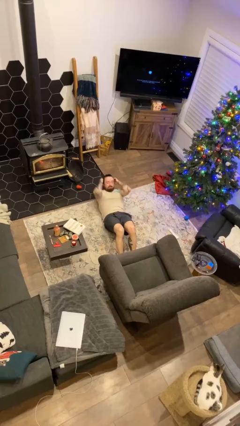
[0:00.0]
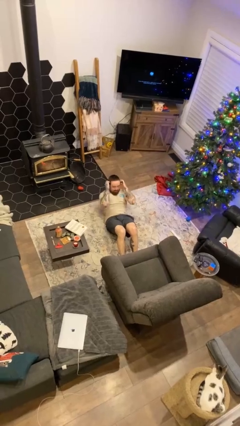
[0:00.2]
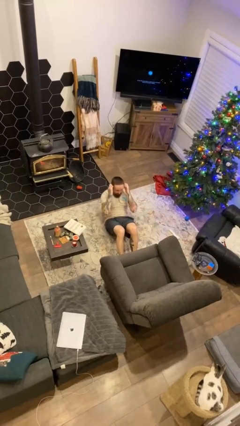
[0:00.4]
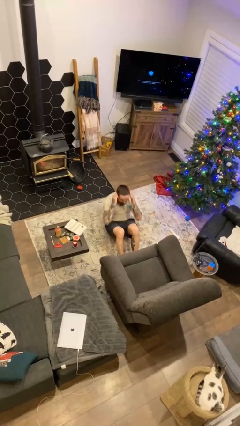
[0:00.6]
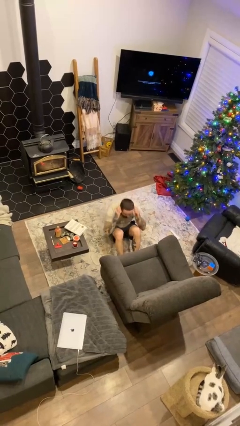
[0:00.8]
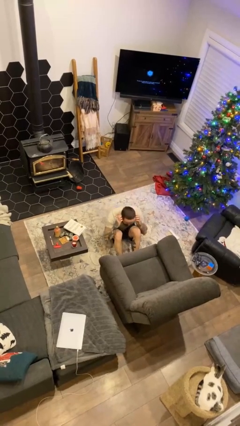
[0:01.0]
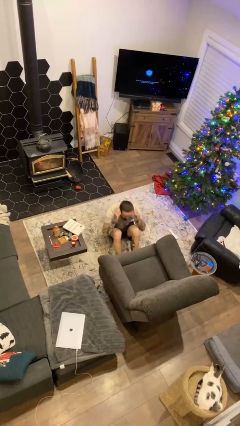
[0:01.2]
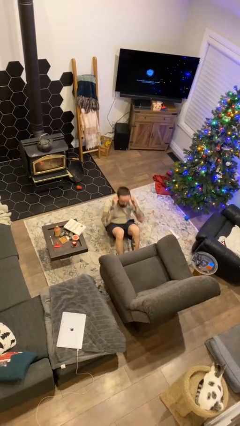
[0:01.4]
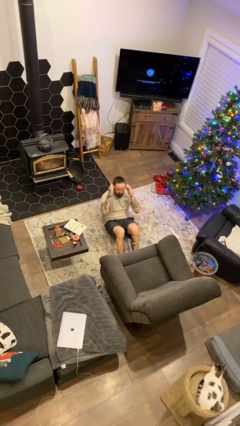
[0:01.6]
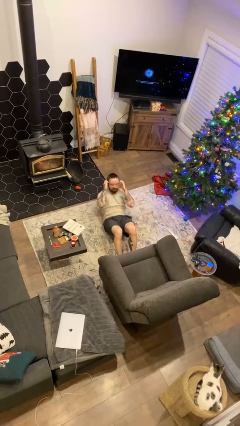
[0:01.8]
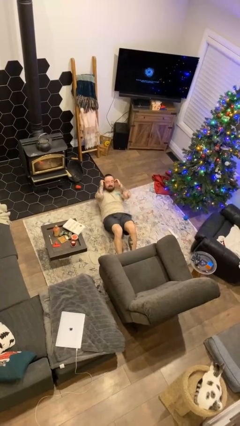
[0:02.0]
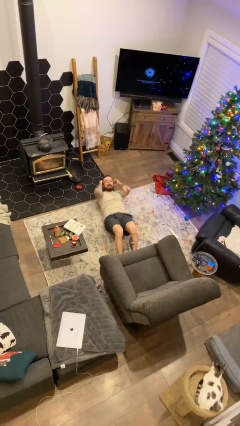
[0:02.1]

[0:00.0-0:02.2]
person exercises with situp

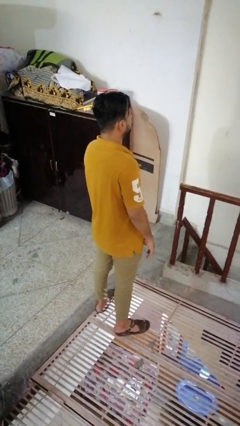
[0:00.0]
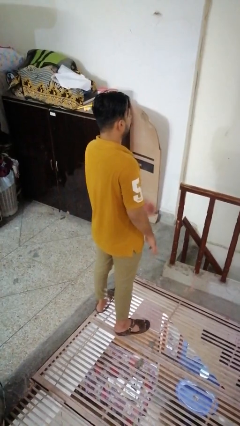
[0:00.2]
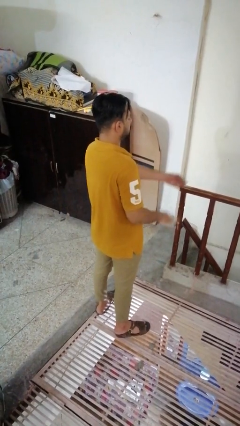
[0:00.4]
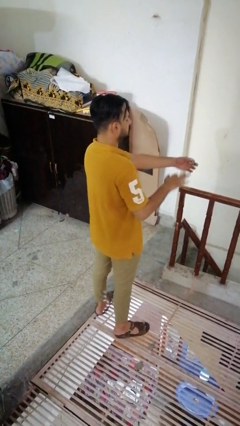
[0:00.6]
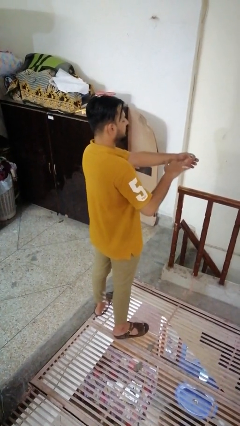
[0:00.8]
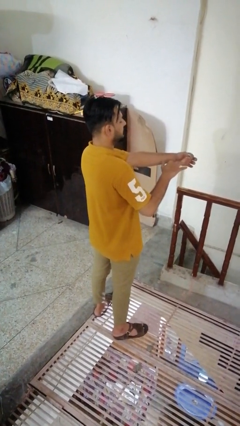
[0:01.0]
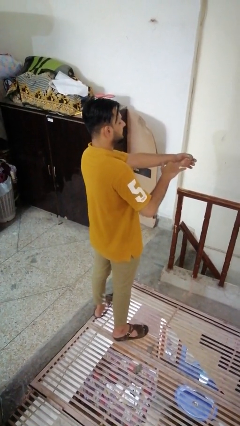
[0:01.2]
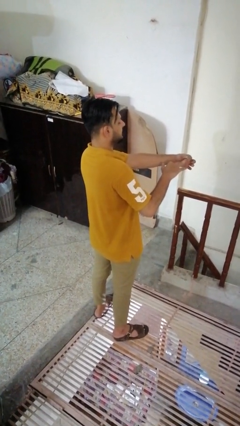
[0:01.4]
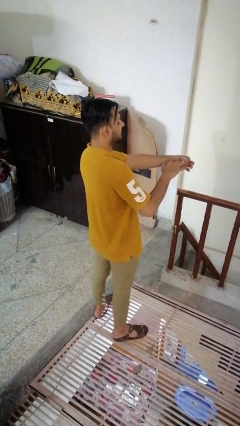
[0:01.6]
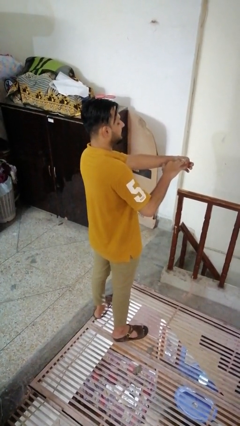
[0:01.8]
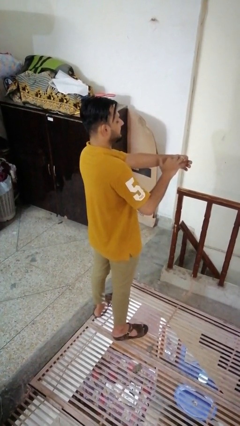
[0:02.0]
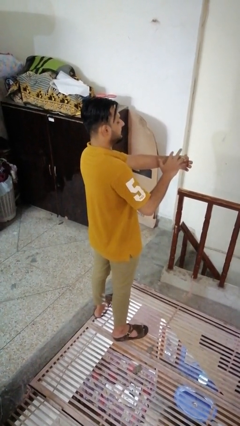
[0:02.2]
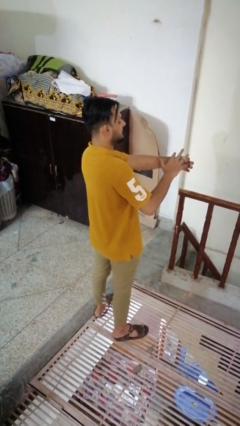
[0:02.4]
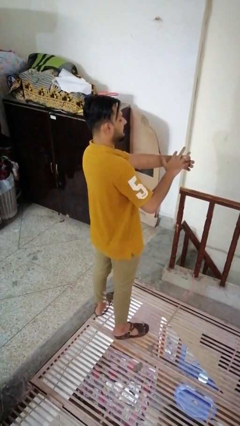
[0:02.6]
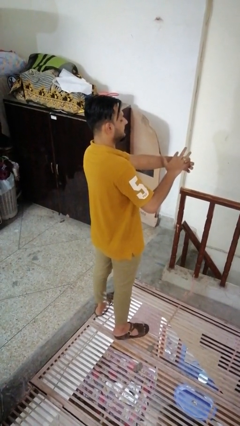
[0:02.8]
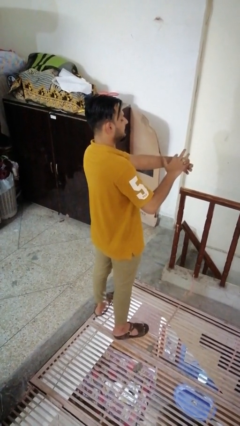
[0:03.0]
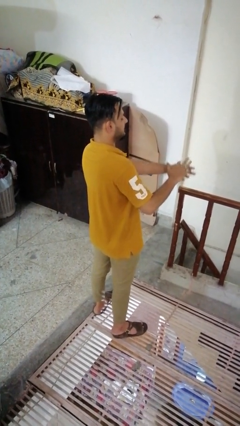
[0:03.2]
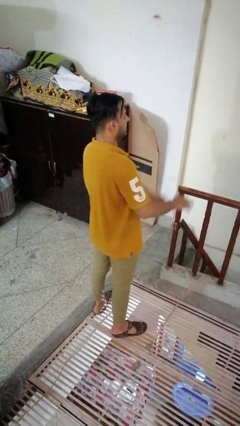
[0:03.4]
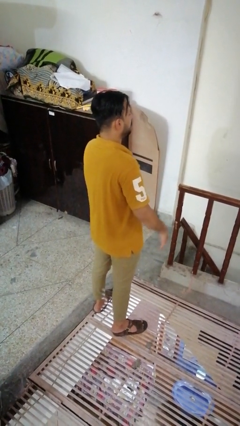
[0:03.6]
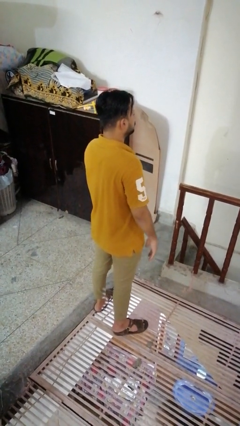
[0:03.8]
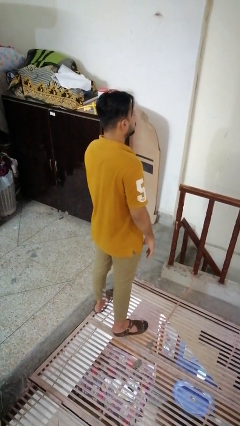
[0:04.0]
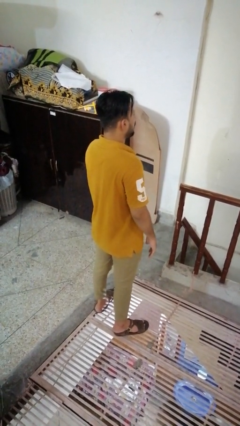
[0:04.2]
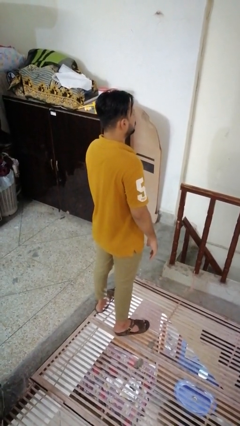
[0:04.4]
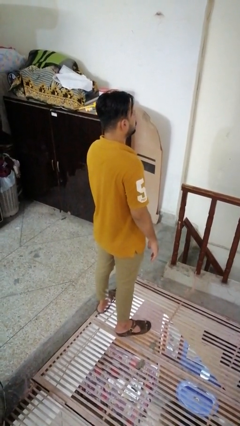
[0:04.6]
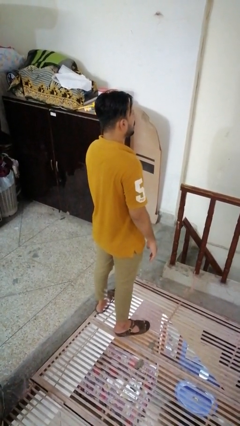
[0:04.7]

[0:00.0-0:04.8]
person puts on ring

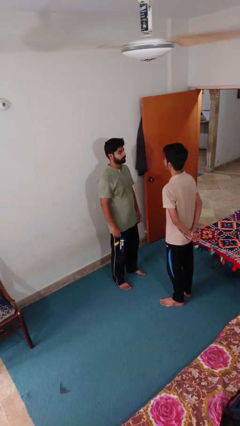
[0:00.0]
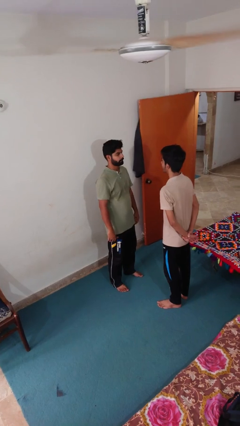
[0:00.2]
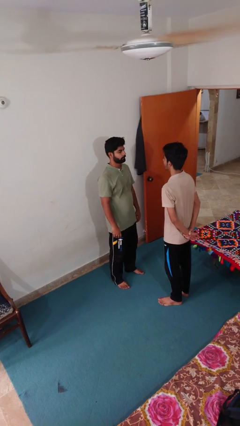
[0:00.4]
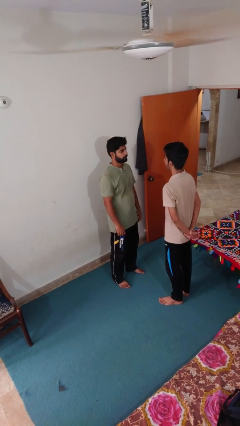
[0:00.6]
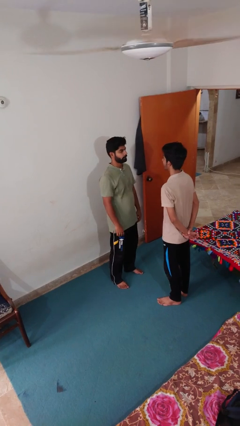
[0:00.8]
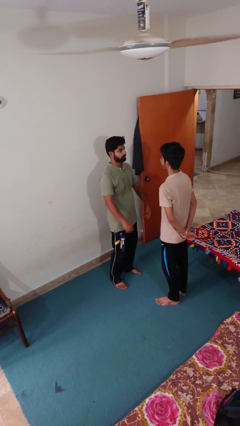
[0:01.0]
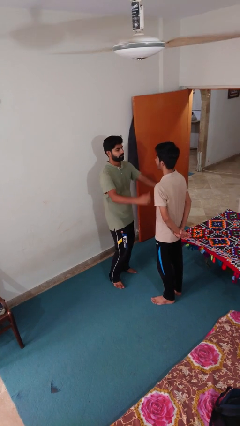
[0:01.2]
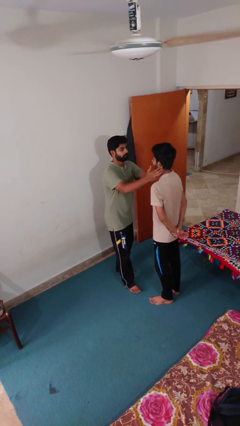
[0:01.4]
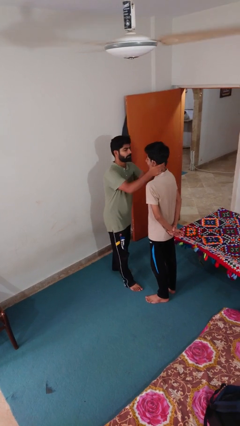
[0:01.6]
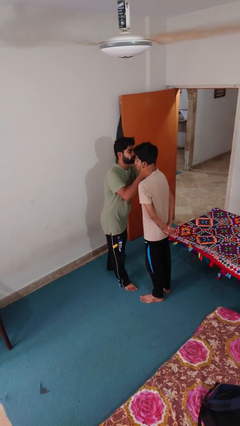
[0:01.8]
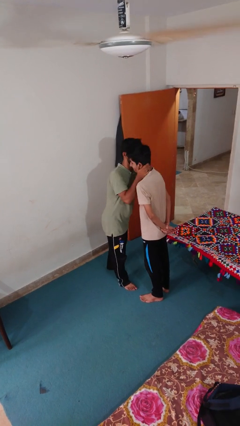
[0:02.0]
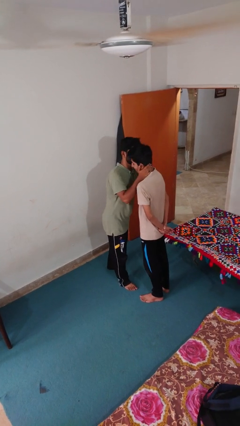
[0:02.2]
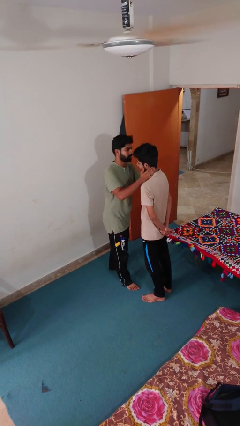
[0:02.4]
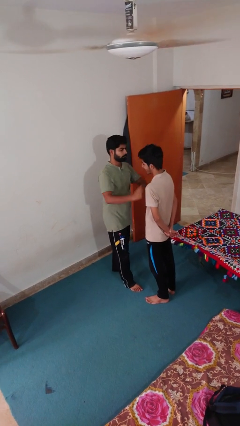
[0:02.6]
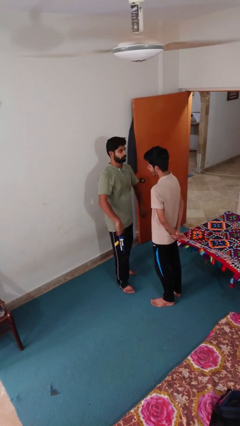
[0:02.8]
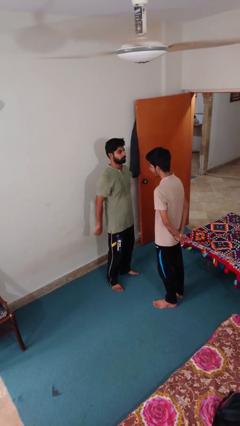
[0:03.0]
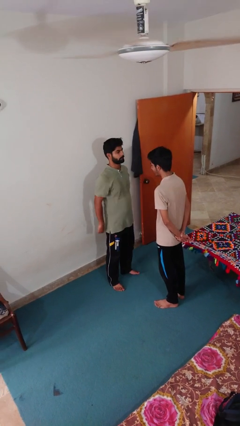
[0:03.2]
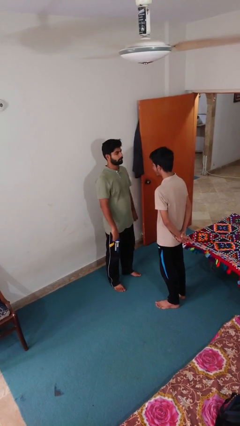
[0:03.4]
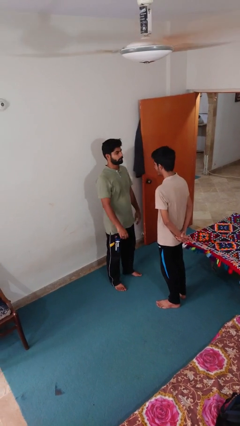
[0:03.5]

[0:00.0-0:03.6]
person kisses cheek of person

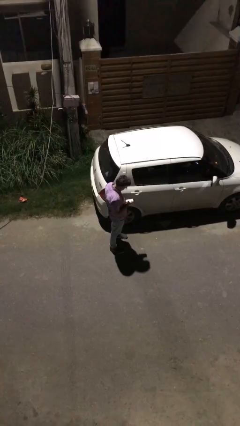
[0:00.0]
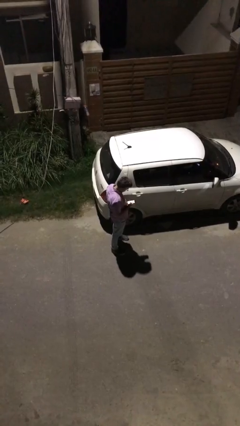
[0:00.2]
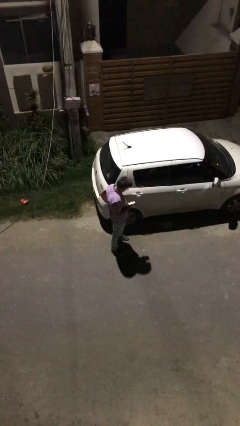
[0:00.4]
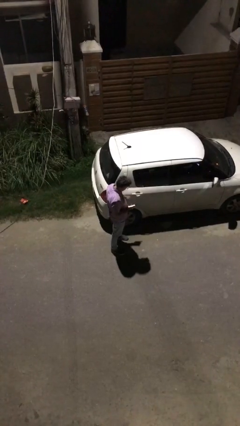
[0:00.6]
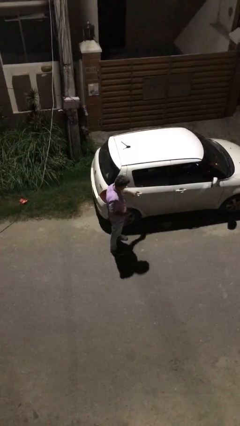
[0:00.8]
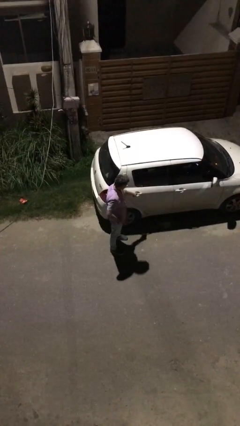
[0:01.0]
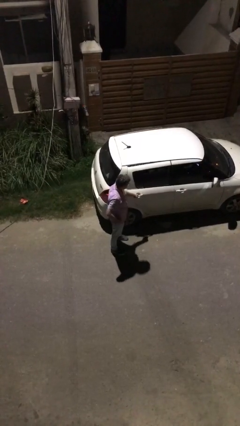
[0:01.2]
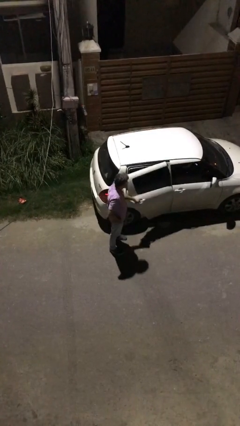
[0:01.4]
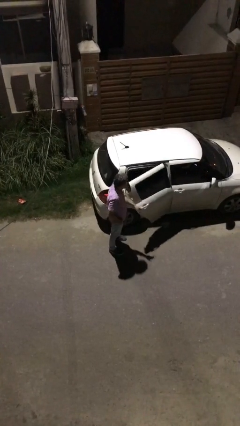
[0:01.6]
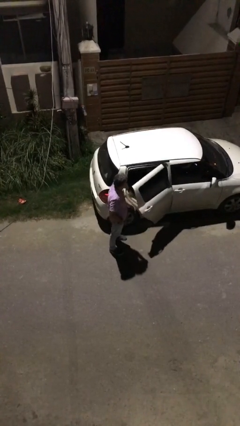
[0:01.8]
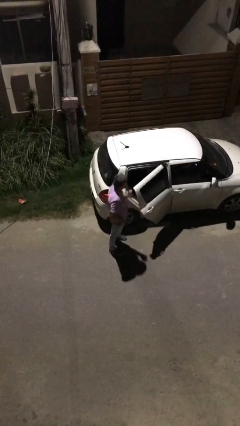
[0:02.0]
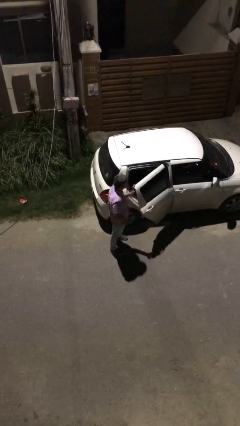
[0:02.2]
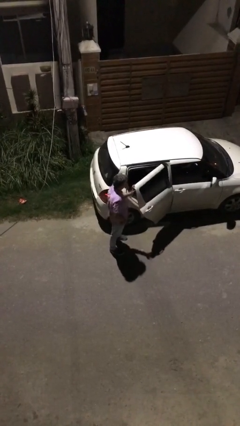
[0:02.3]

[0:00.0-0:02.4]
person opens car door

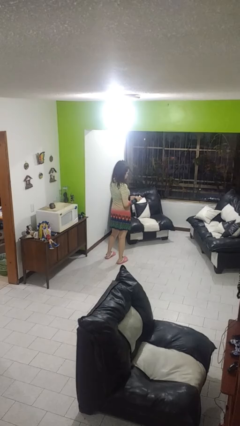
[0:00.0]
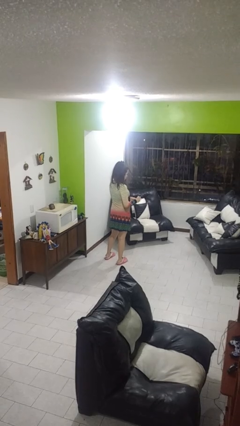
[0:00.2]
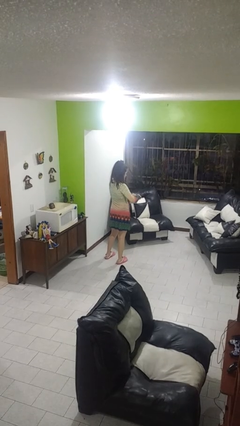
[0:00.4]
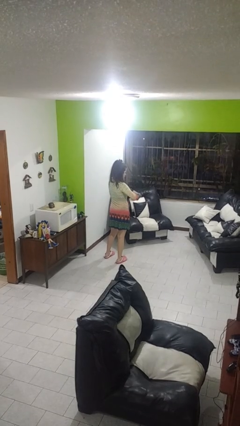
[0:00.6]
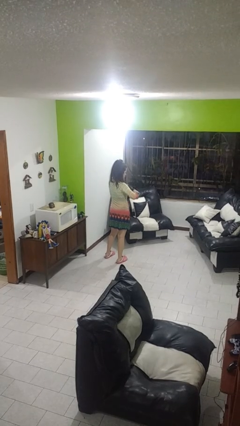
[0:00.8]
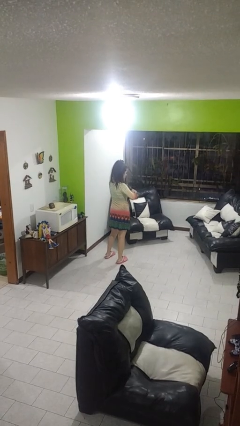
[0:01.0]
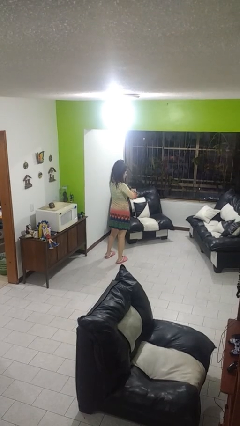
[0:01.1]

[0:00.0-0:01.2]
person tears paper

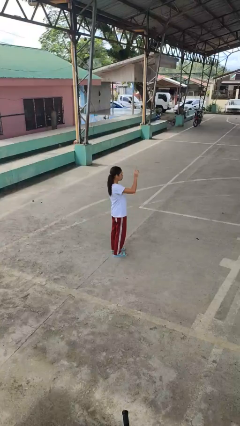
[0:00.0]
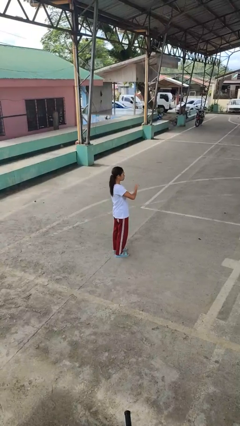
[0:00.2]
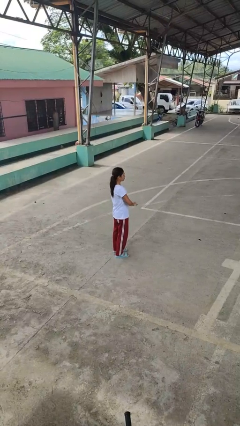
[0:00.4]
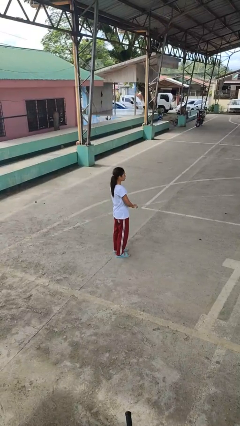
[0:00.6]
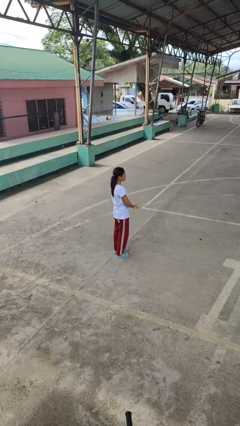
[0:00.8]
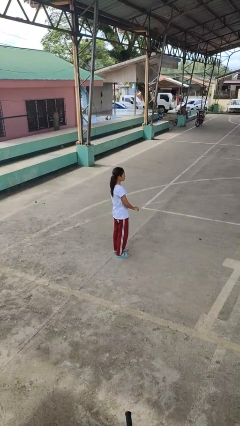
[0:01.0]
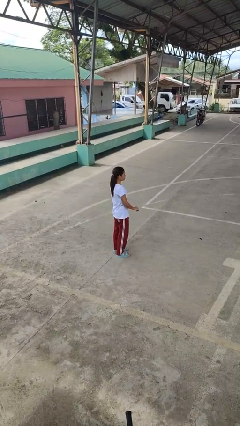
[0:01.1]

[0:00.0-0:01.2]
person gestures swipe down

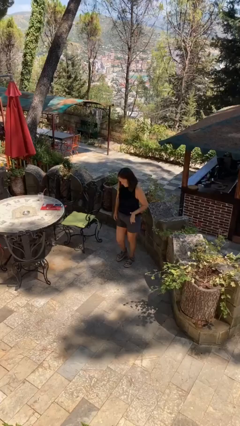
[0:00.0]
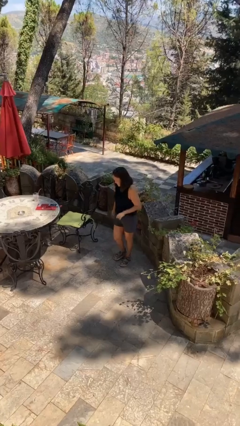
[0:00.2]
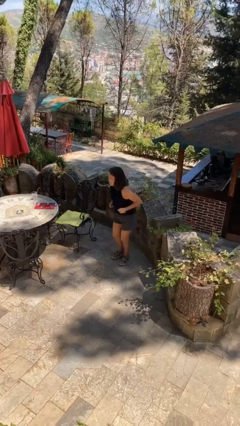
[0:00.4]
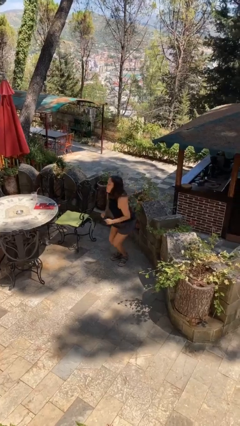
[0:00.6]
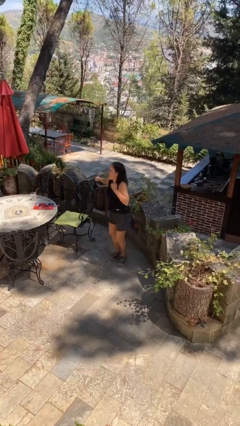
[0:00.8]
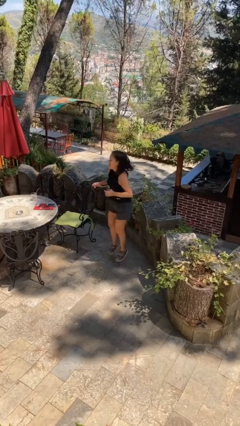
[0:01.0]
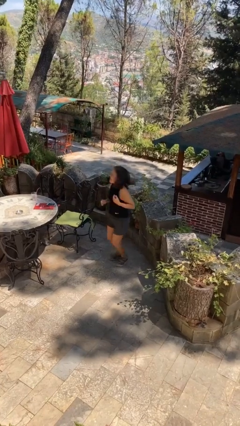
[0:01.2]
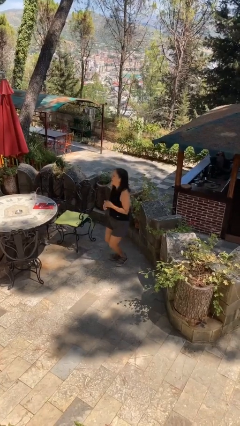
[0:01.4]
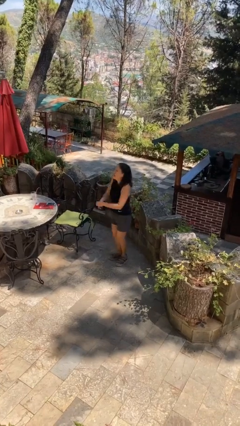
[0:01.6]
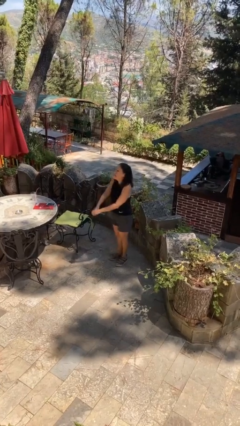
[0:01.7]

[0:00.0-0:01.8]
person jumps
